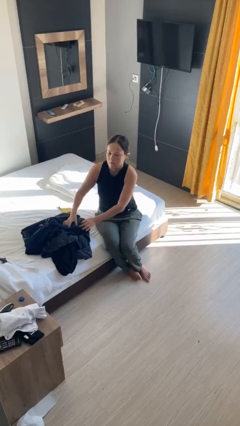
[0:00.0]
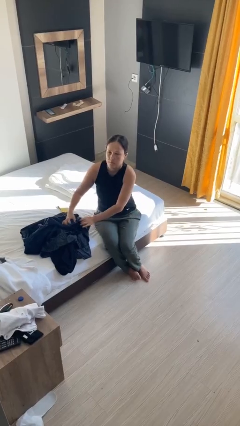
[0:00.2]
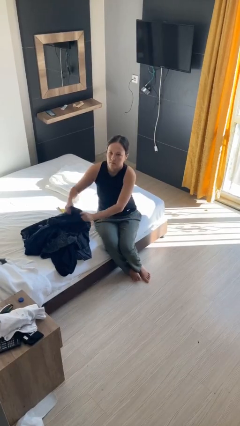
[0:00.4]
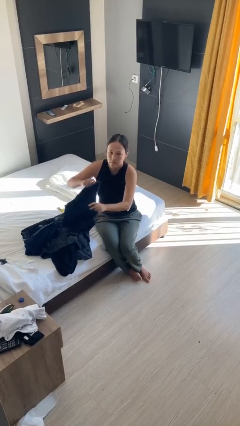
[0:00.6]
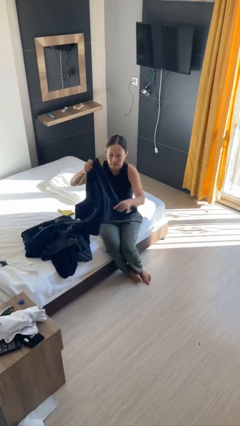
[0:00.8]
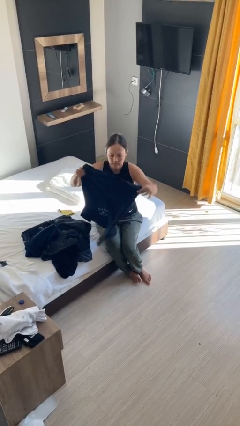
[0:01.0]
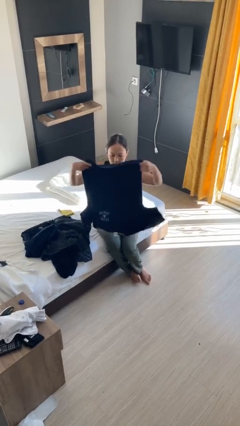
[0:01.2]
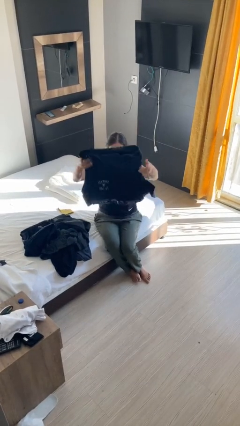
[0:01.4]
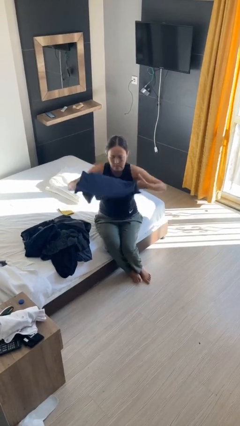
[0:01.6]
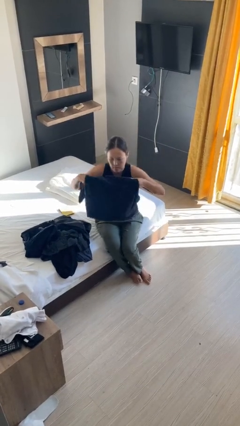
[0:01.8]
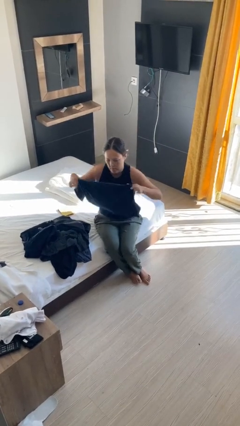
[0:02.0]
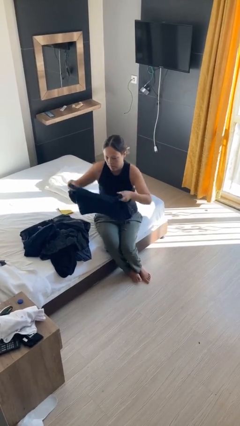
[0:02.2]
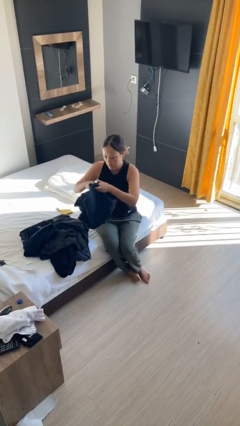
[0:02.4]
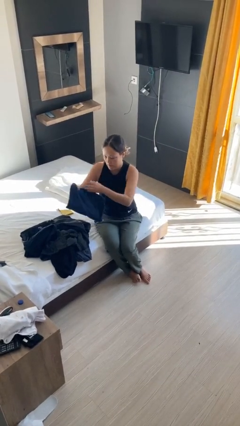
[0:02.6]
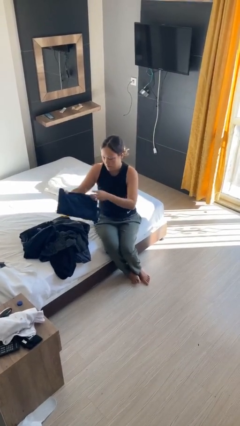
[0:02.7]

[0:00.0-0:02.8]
person folds shirt

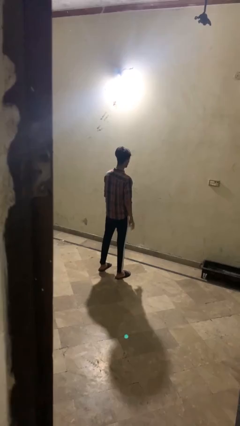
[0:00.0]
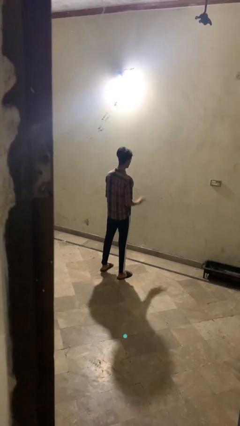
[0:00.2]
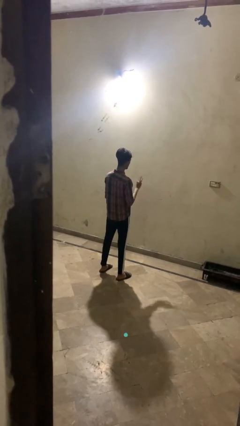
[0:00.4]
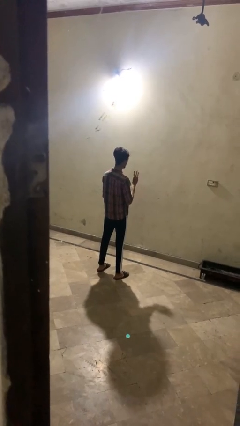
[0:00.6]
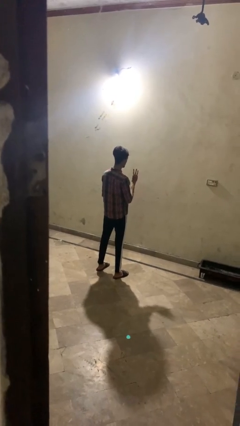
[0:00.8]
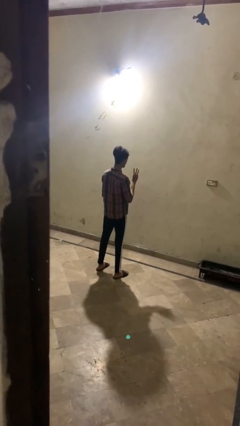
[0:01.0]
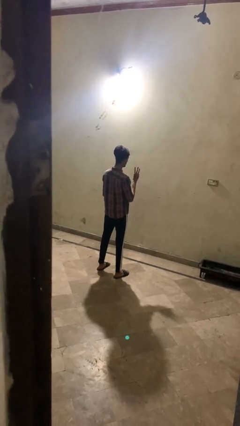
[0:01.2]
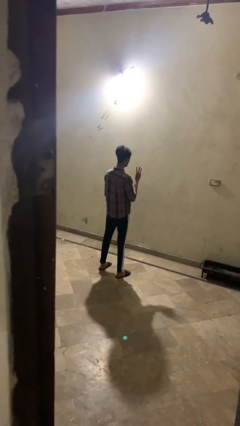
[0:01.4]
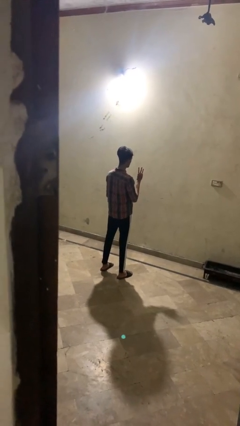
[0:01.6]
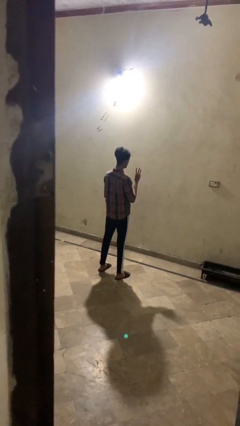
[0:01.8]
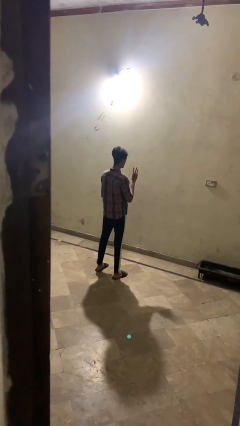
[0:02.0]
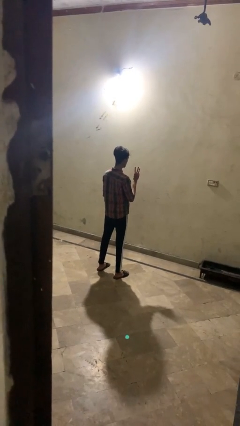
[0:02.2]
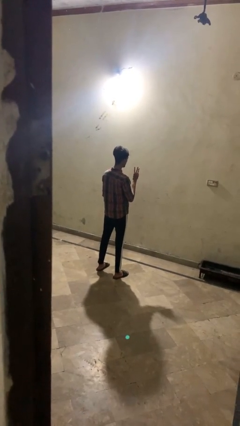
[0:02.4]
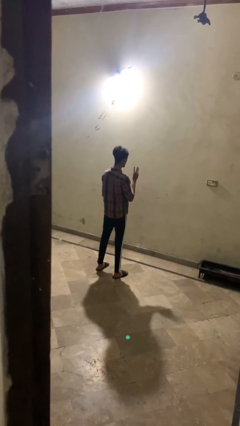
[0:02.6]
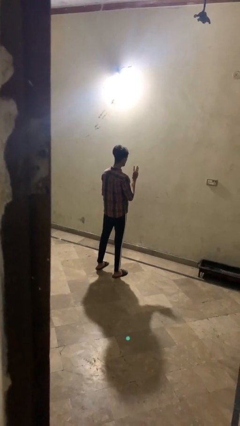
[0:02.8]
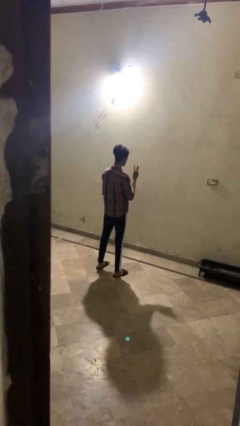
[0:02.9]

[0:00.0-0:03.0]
person gestures number three

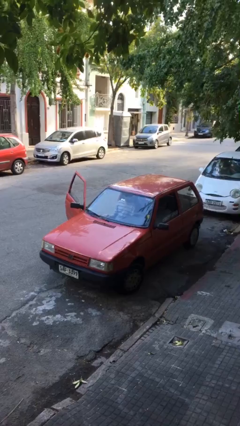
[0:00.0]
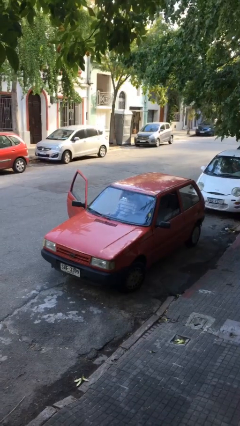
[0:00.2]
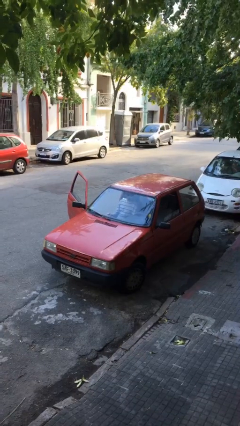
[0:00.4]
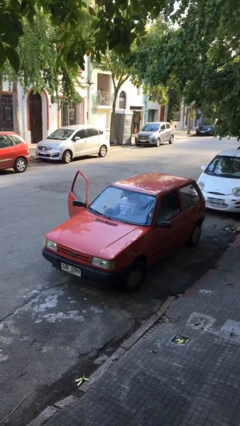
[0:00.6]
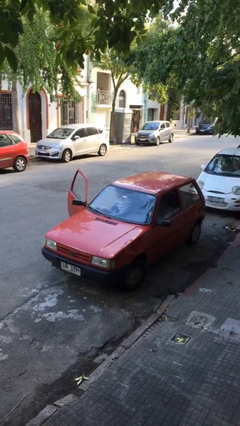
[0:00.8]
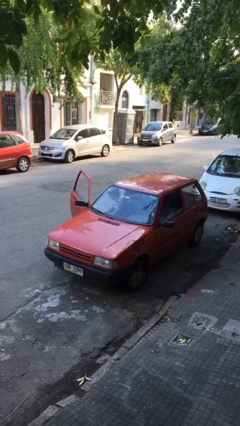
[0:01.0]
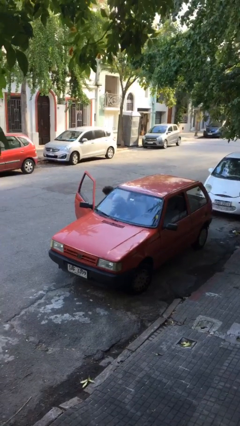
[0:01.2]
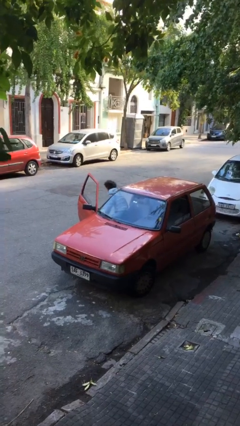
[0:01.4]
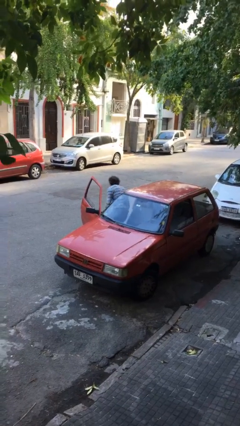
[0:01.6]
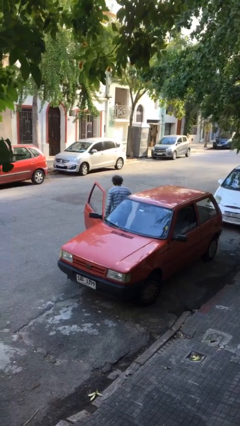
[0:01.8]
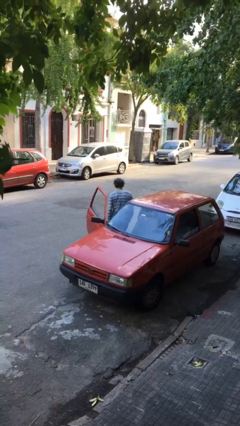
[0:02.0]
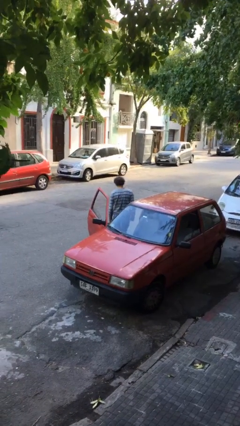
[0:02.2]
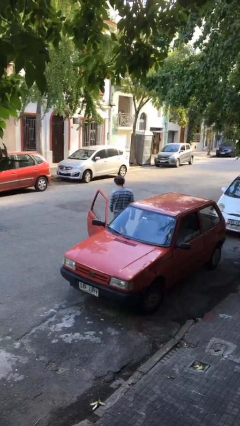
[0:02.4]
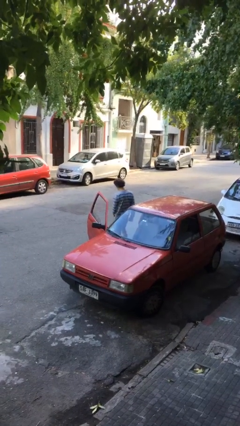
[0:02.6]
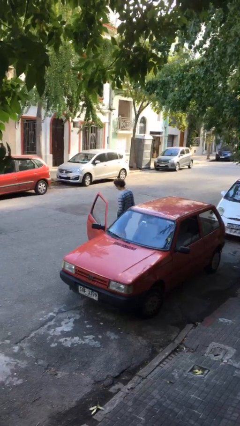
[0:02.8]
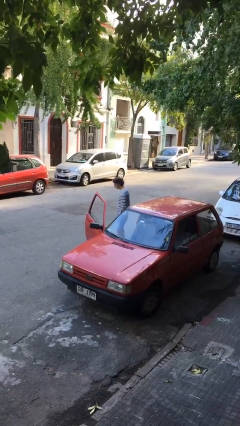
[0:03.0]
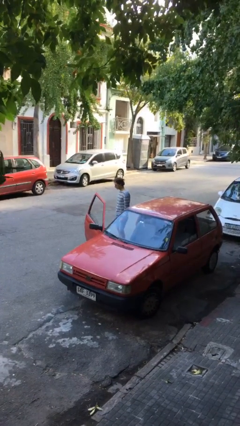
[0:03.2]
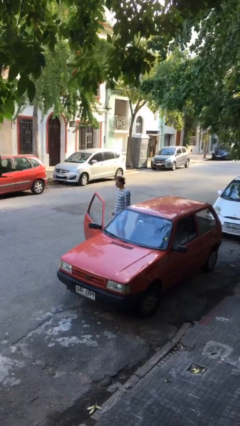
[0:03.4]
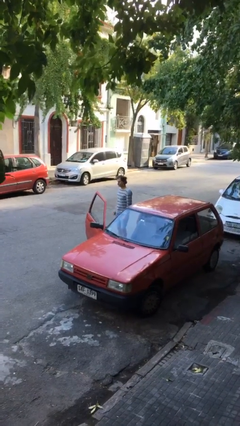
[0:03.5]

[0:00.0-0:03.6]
person exits car

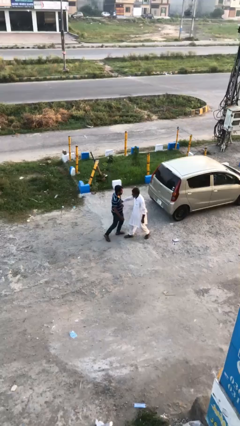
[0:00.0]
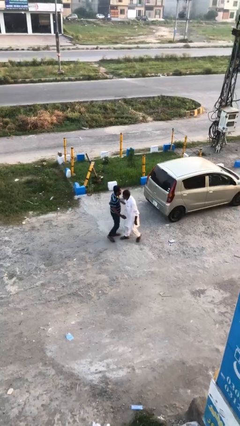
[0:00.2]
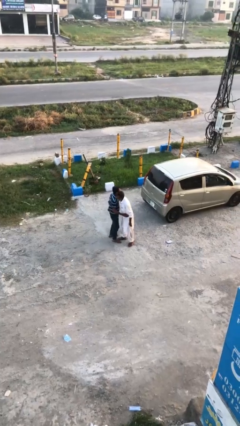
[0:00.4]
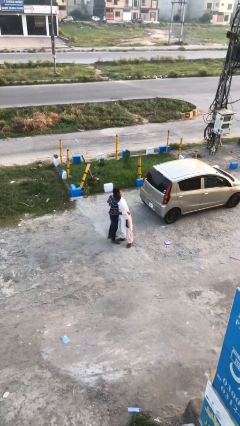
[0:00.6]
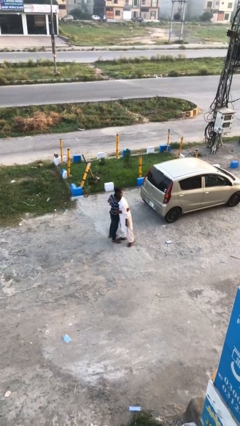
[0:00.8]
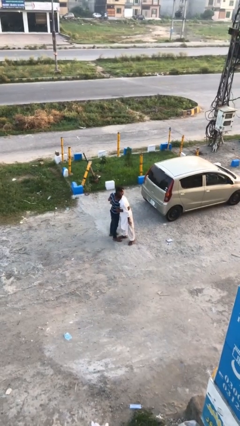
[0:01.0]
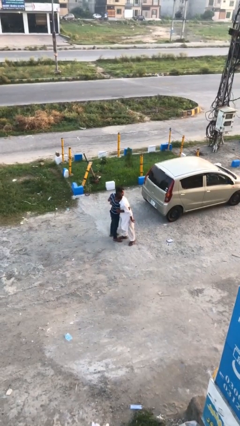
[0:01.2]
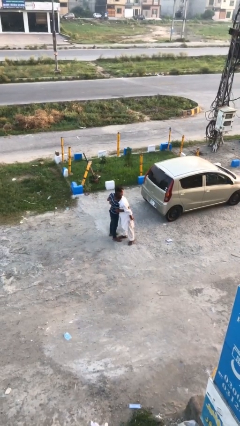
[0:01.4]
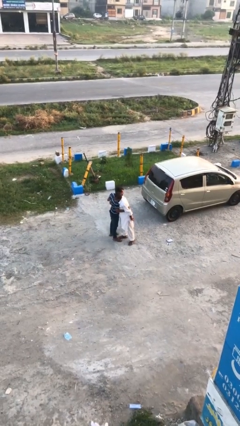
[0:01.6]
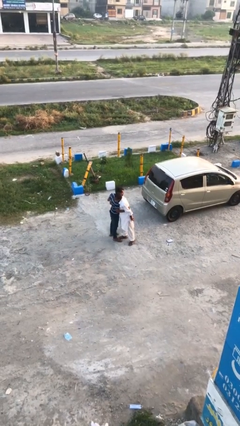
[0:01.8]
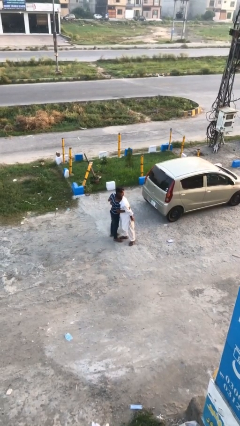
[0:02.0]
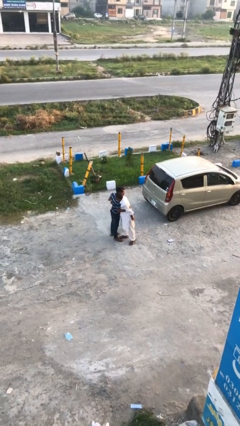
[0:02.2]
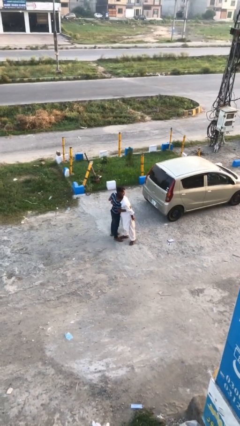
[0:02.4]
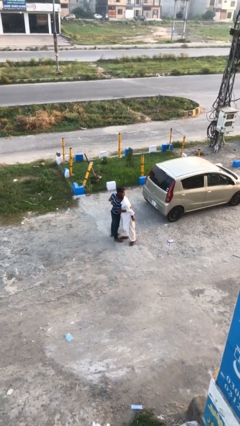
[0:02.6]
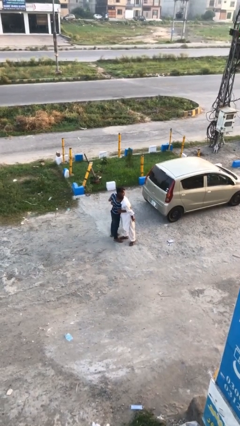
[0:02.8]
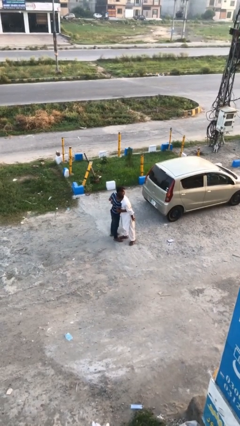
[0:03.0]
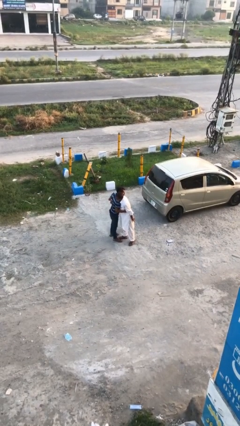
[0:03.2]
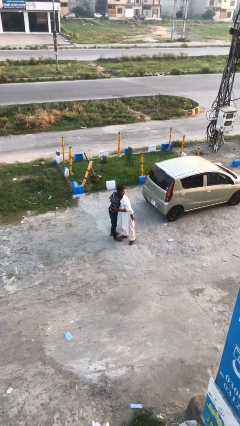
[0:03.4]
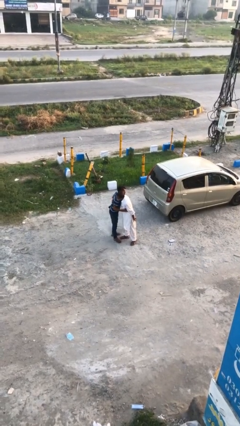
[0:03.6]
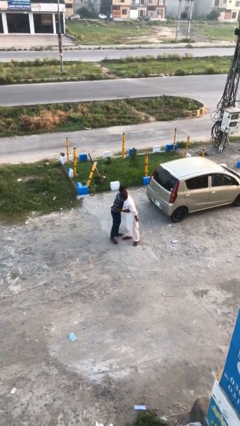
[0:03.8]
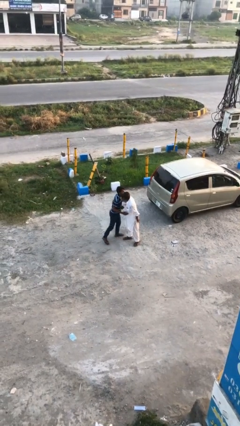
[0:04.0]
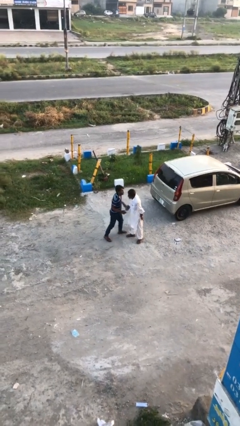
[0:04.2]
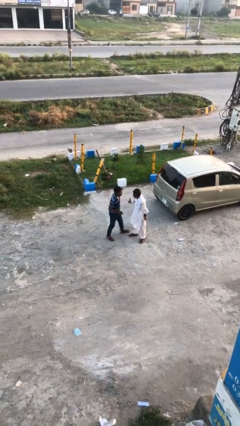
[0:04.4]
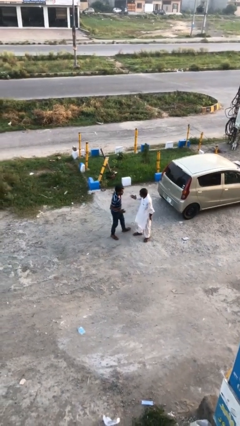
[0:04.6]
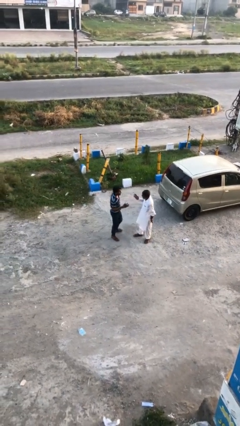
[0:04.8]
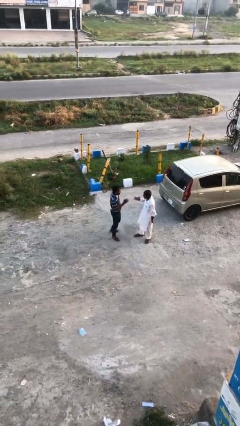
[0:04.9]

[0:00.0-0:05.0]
person embraces person

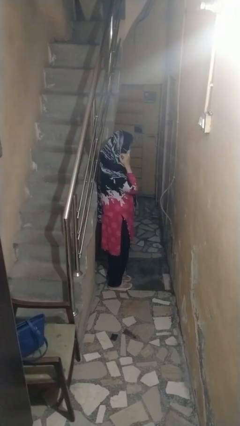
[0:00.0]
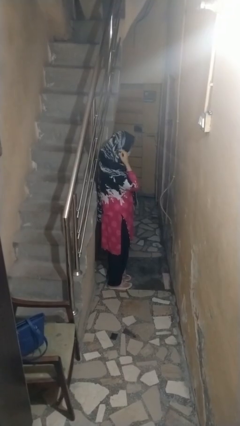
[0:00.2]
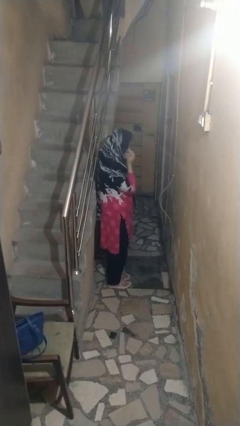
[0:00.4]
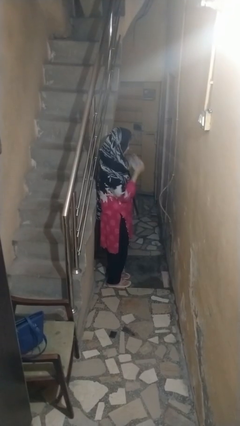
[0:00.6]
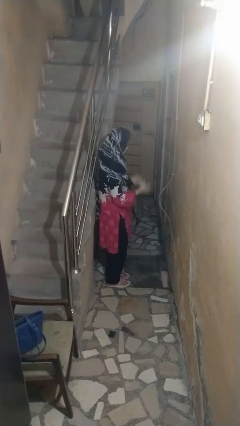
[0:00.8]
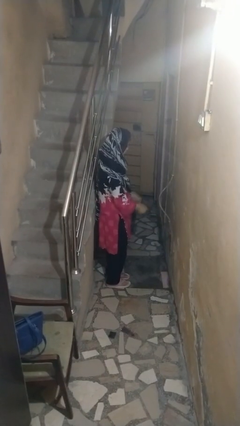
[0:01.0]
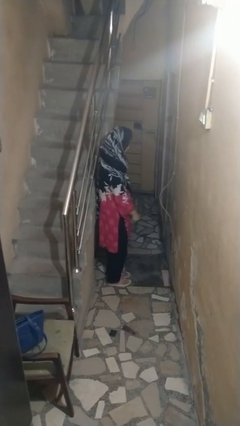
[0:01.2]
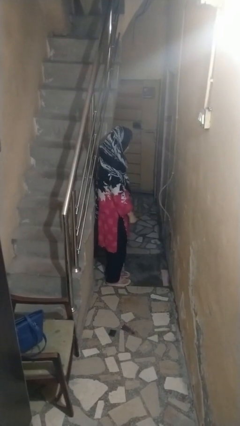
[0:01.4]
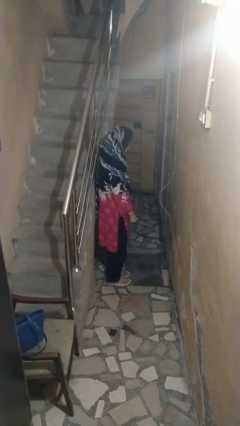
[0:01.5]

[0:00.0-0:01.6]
person takes off facemask

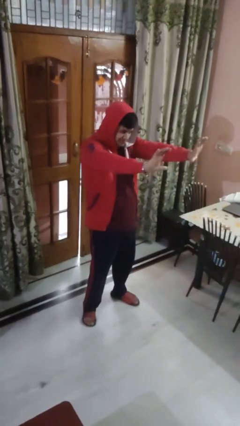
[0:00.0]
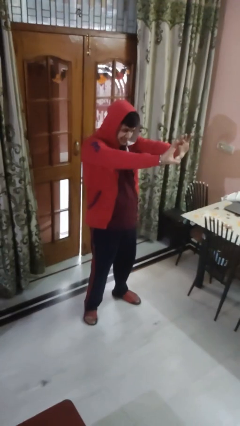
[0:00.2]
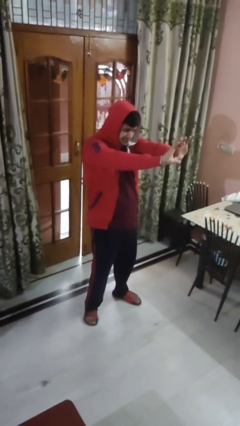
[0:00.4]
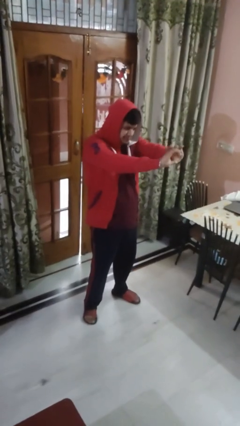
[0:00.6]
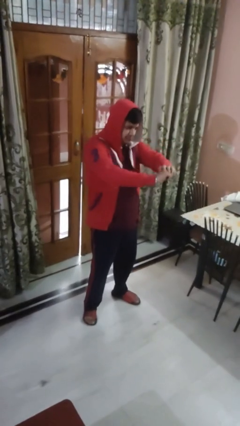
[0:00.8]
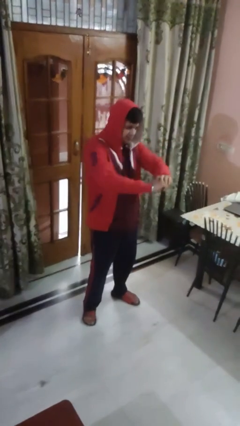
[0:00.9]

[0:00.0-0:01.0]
person gestures zoom out

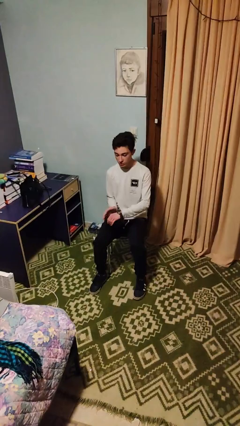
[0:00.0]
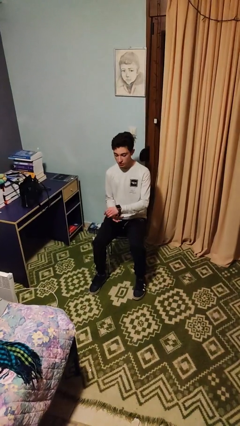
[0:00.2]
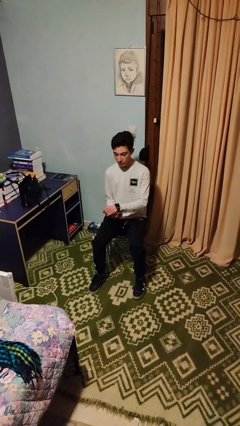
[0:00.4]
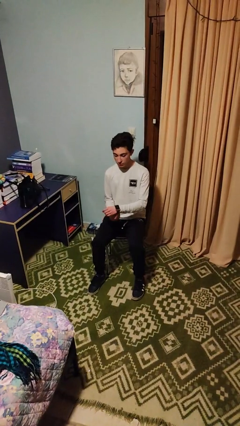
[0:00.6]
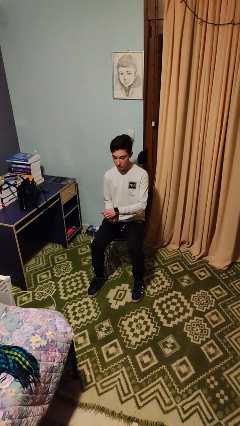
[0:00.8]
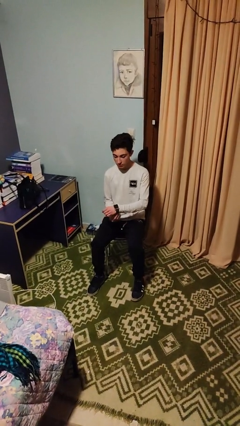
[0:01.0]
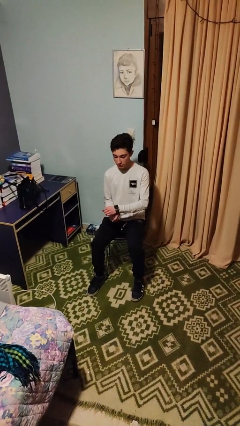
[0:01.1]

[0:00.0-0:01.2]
person puts on wristwatch
